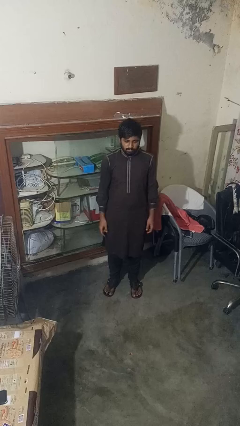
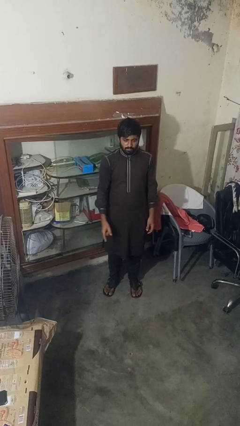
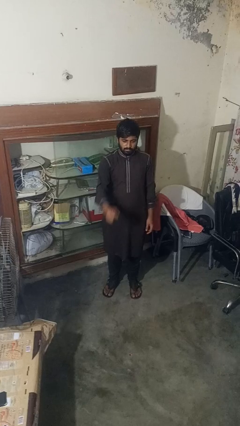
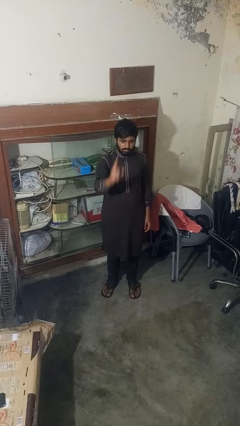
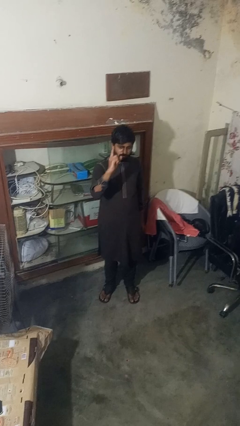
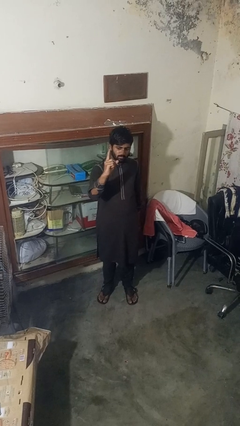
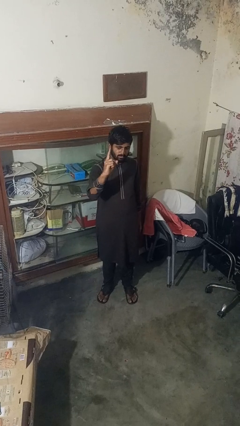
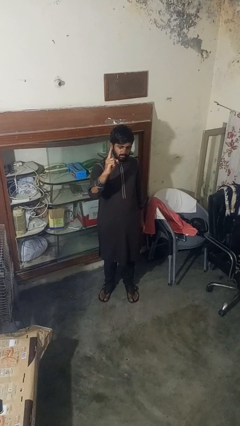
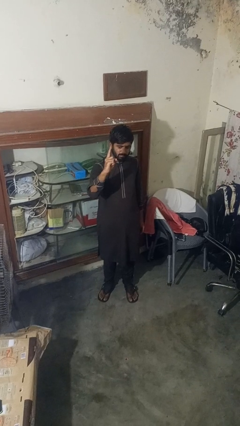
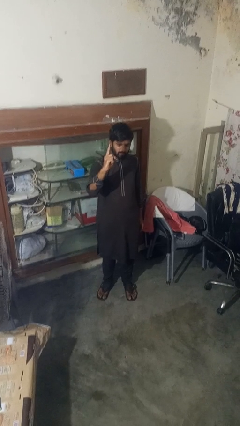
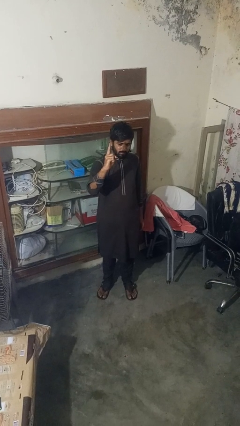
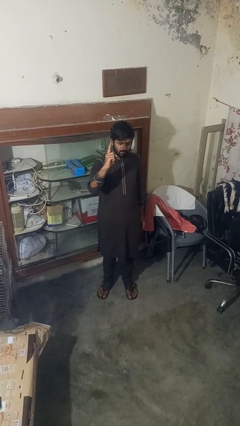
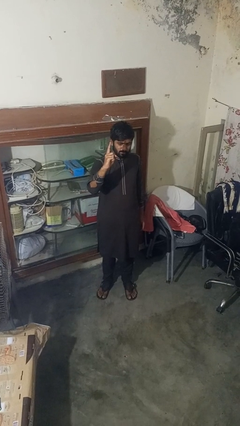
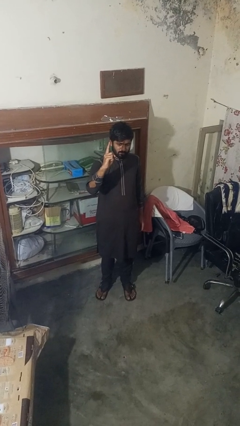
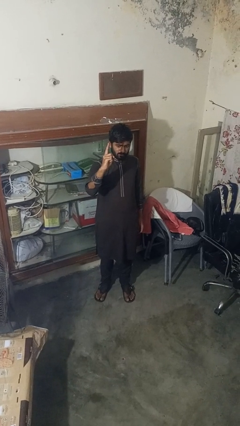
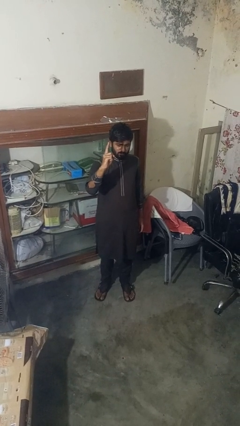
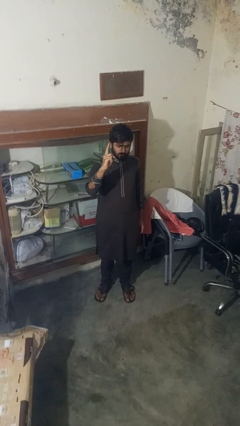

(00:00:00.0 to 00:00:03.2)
person gestures number one

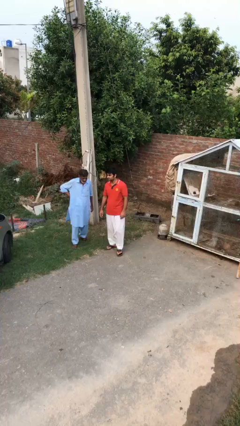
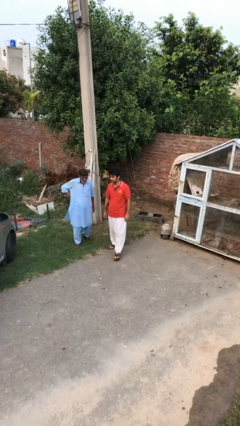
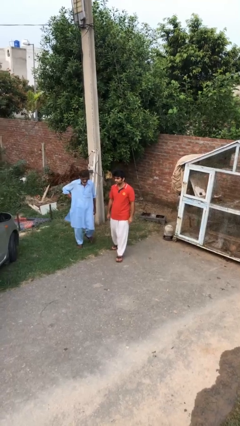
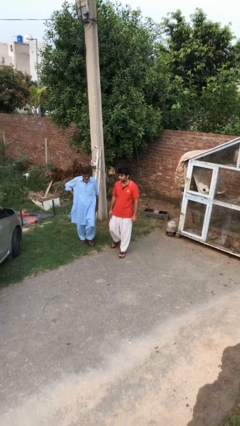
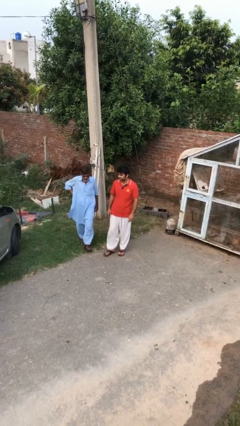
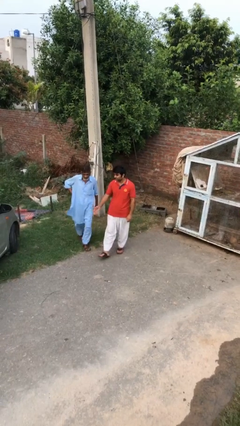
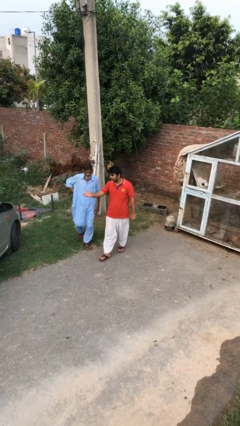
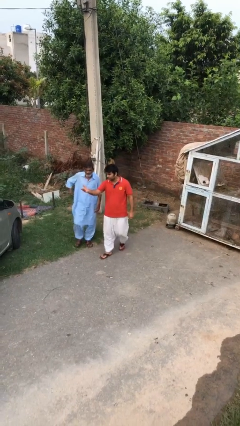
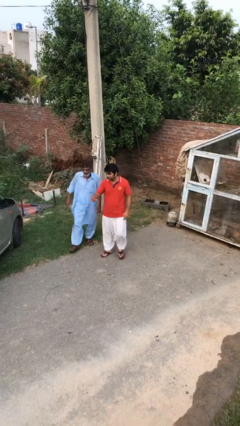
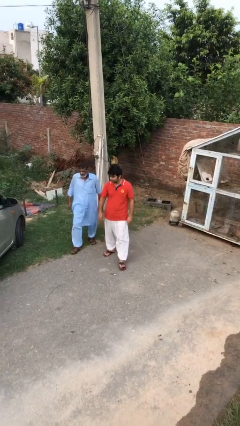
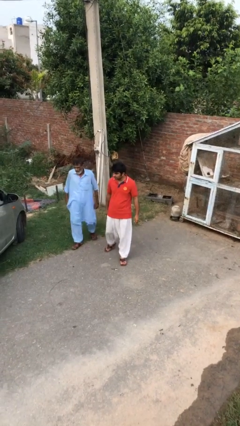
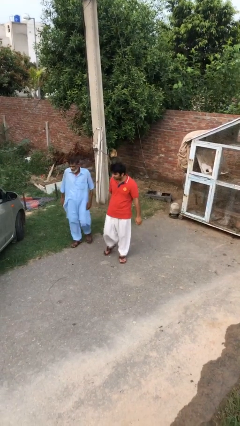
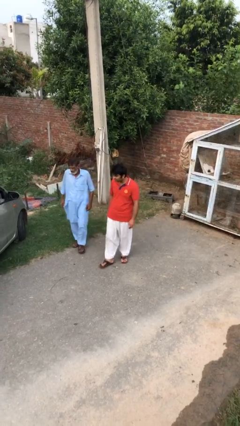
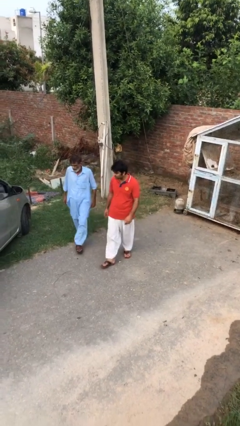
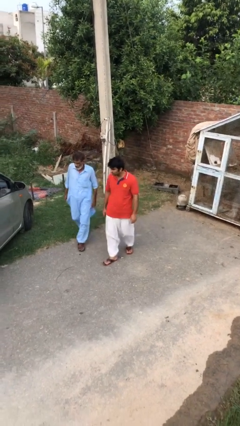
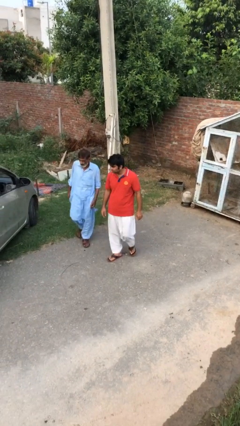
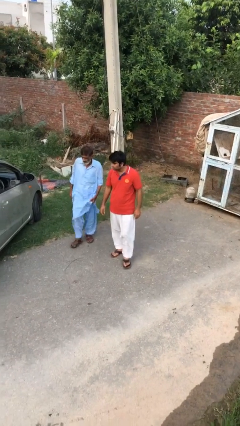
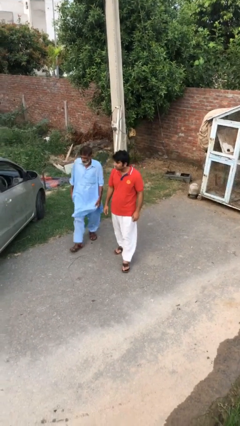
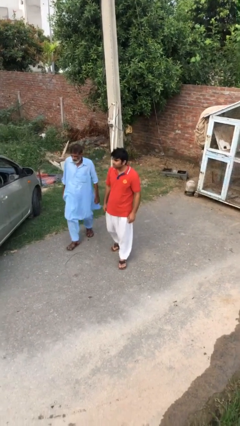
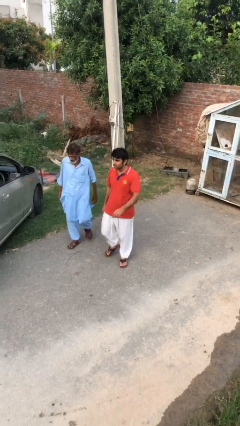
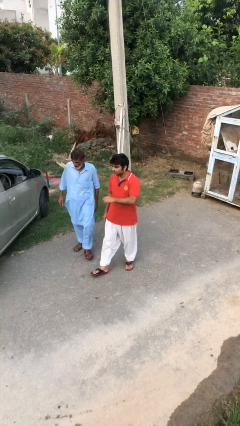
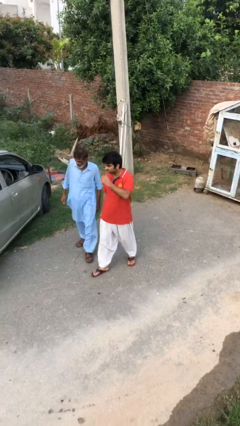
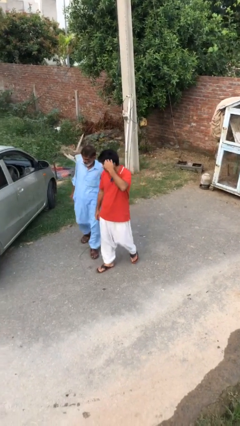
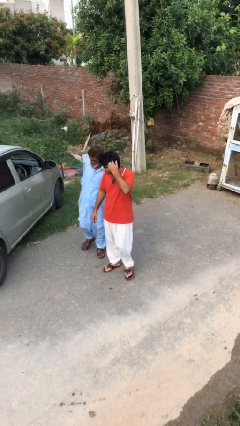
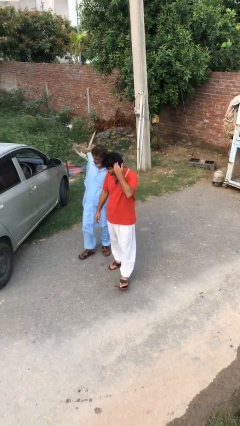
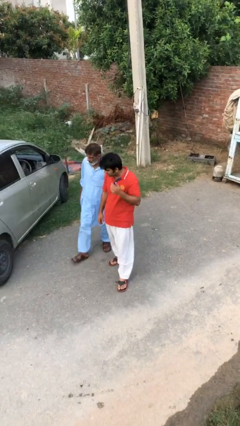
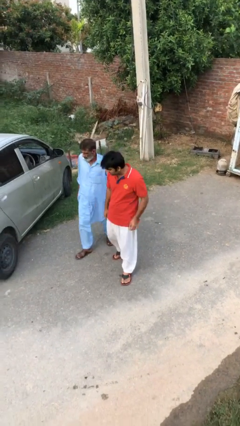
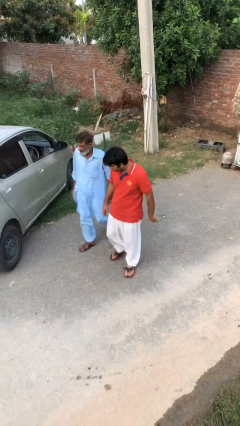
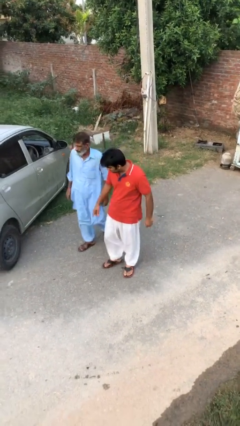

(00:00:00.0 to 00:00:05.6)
person talks to person

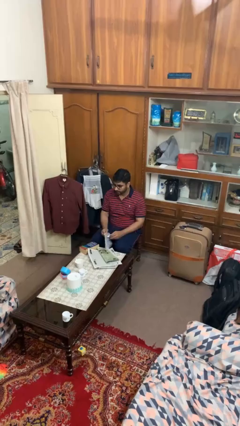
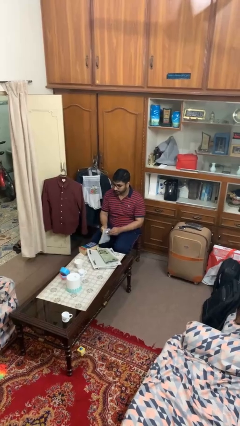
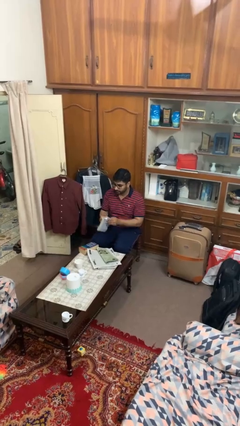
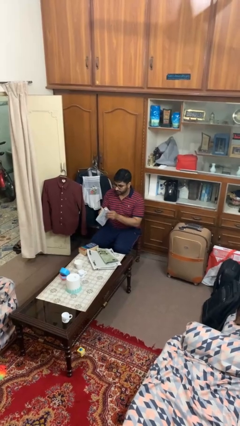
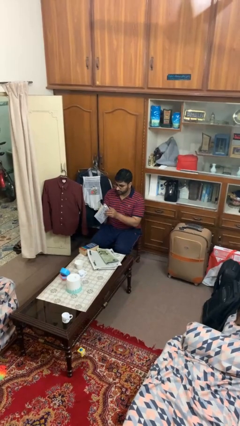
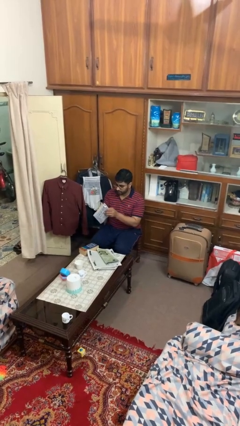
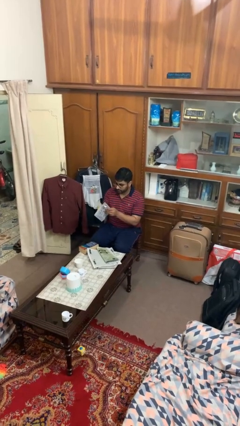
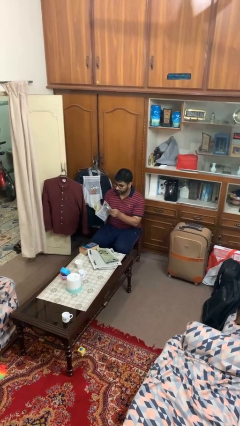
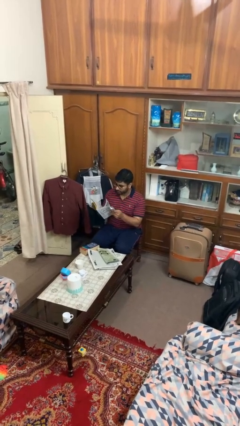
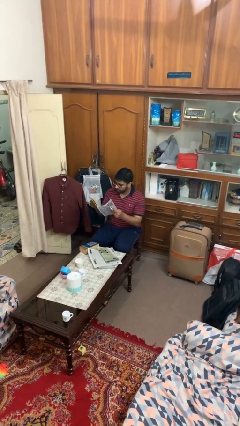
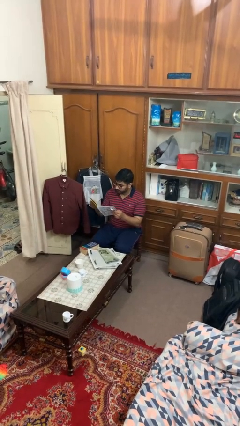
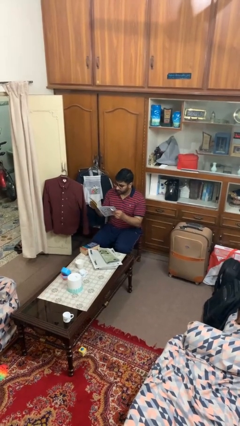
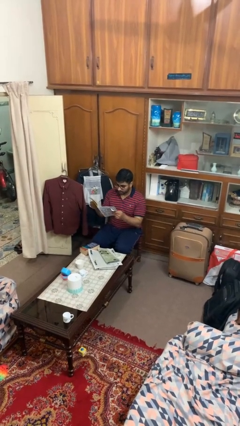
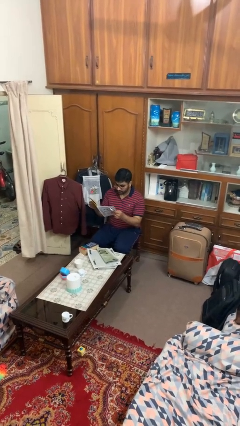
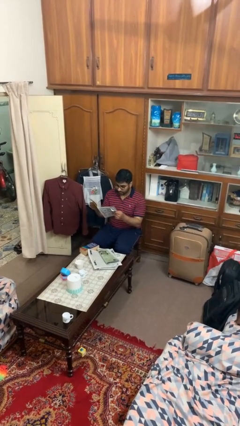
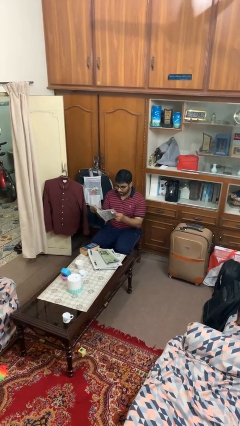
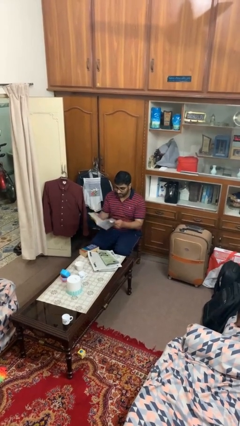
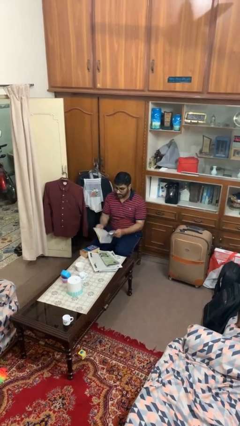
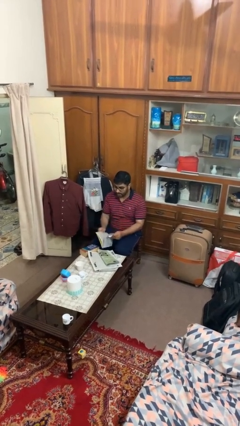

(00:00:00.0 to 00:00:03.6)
person reads magazine

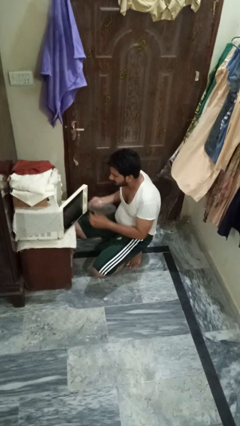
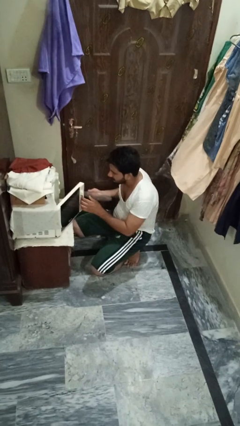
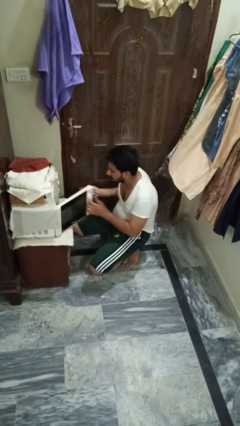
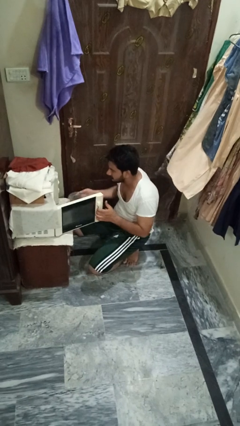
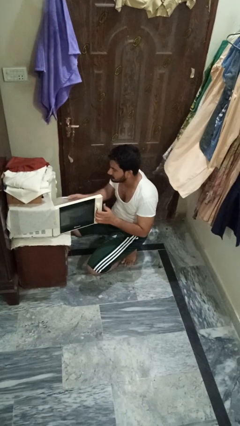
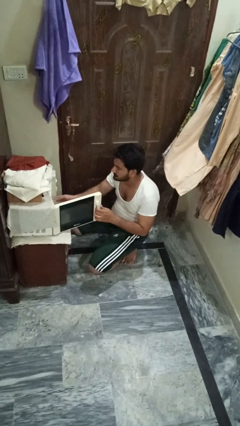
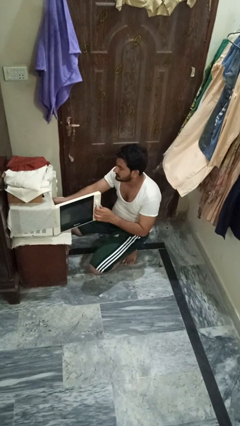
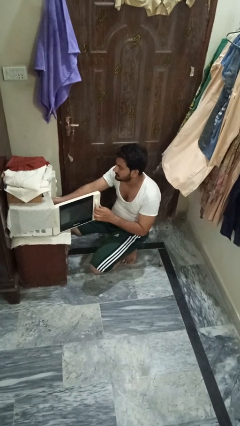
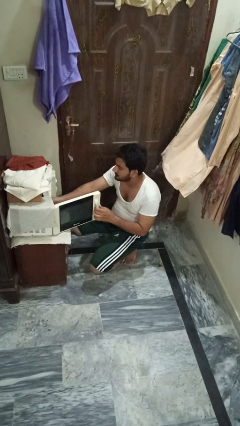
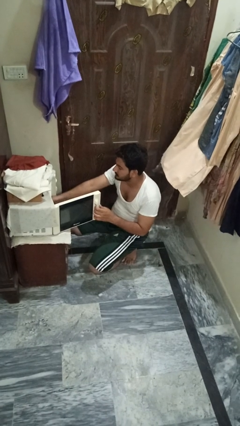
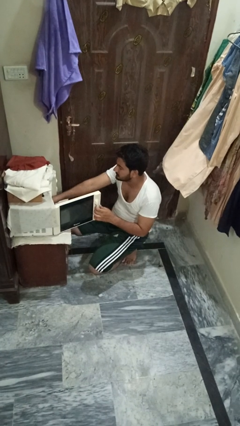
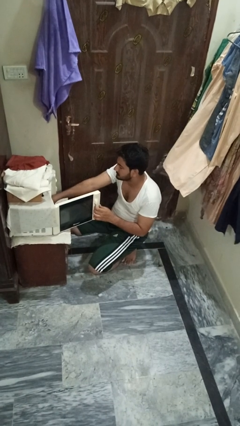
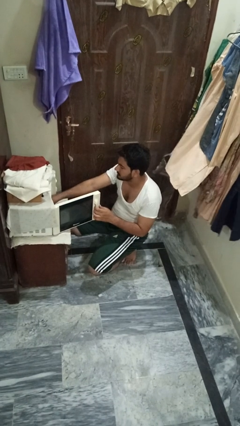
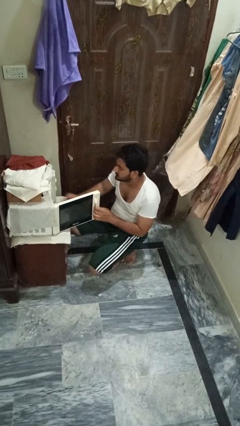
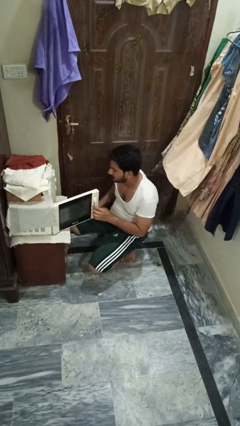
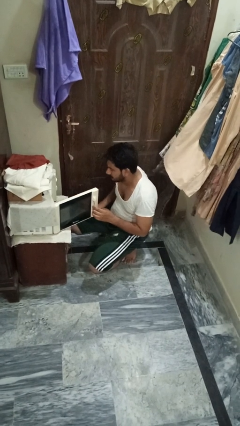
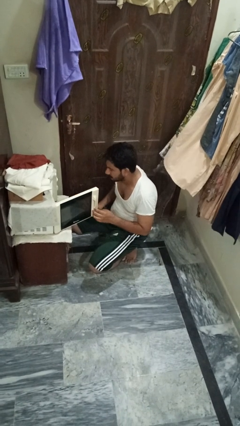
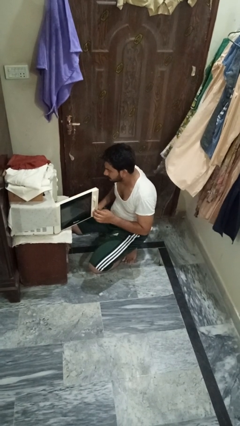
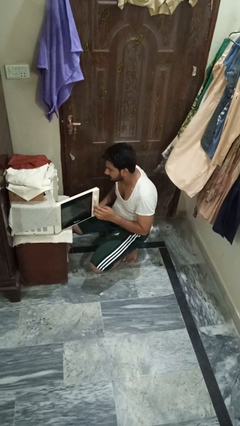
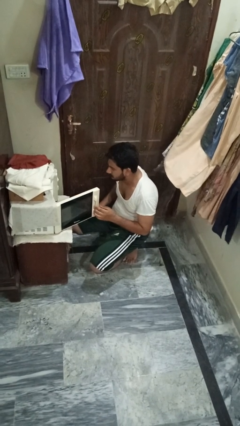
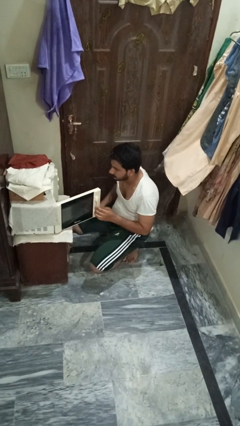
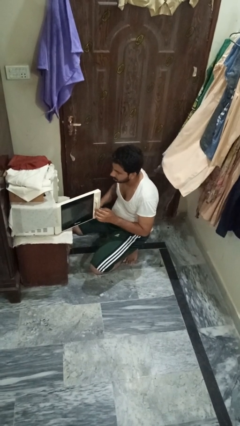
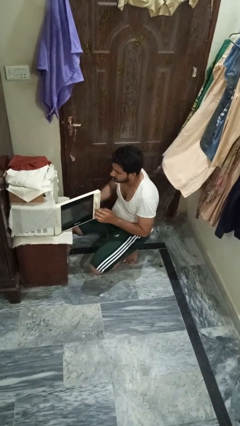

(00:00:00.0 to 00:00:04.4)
person puts object into oven

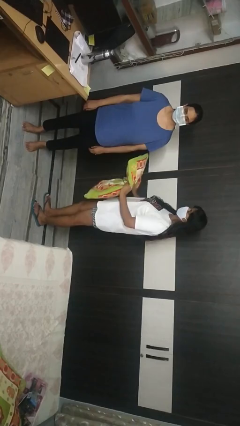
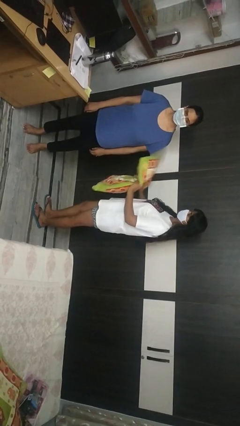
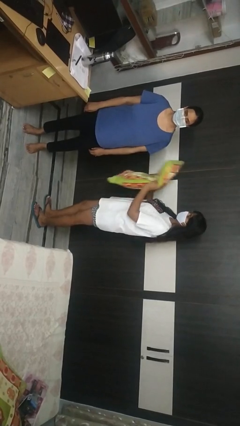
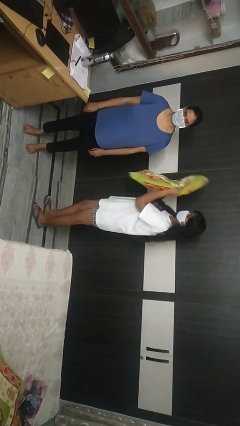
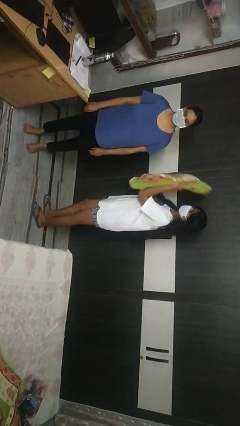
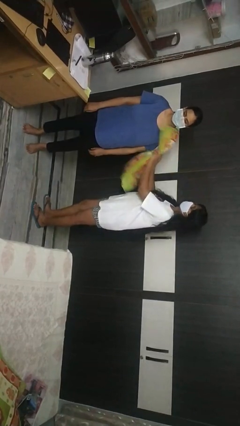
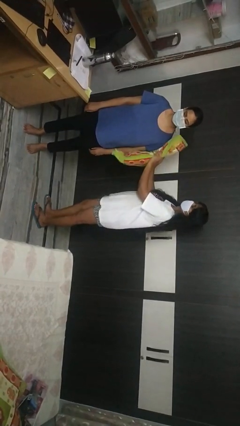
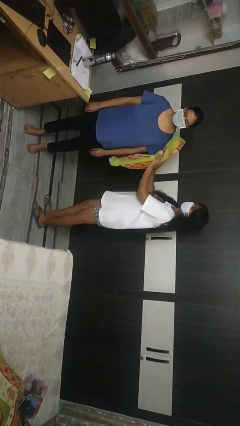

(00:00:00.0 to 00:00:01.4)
person hits person with pillow
